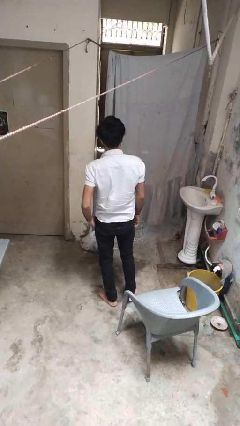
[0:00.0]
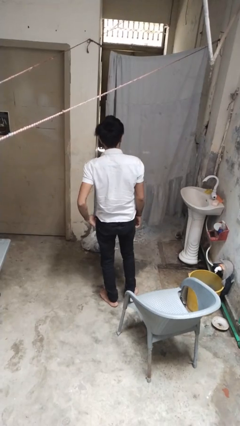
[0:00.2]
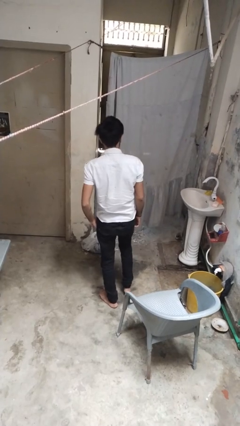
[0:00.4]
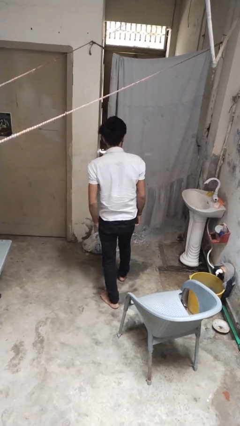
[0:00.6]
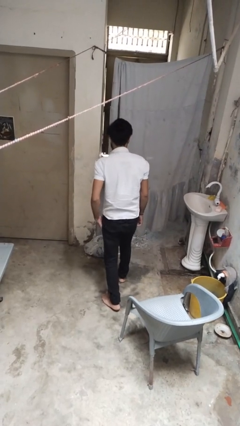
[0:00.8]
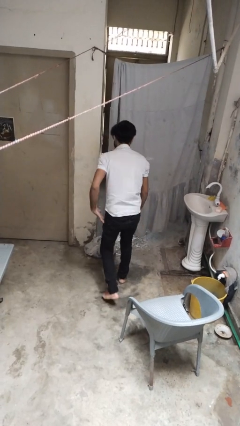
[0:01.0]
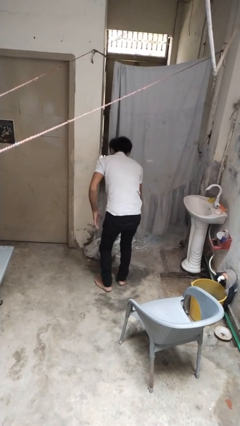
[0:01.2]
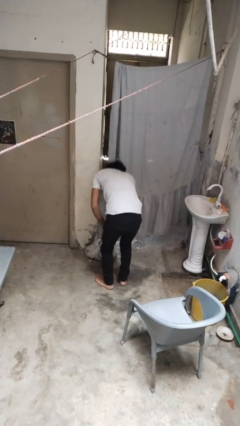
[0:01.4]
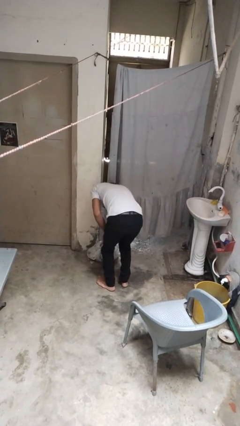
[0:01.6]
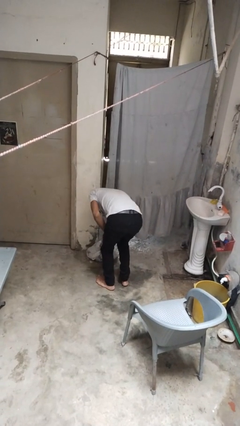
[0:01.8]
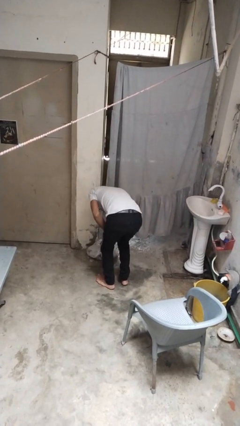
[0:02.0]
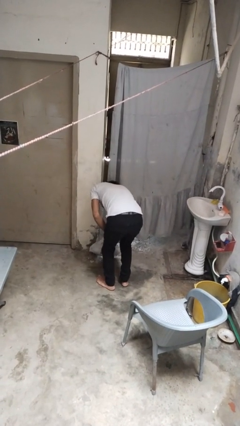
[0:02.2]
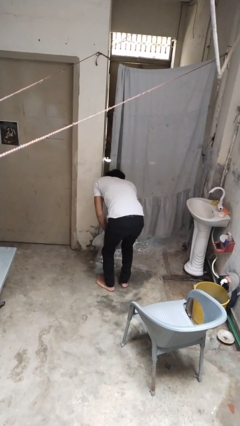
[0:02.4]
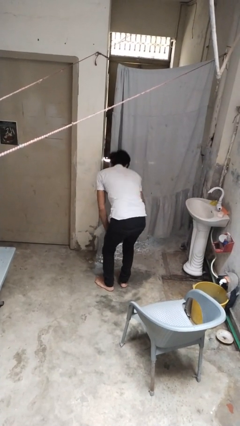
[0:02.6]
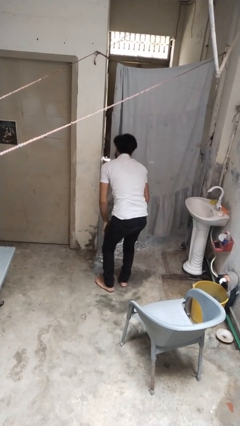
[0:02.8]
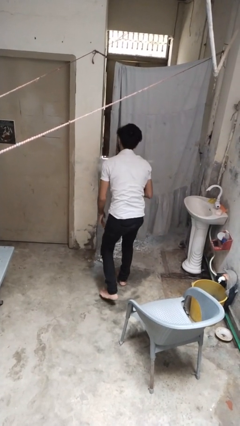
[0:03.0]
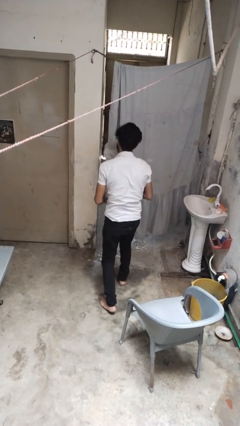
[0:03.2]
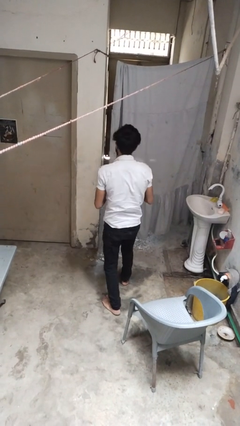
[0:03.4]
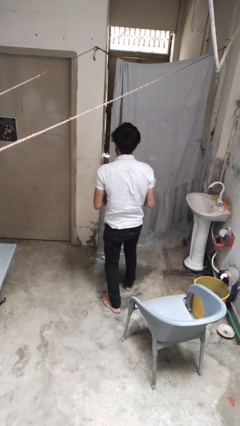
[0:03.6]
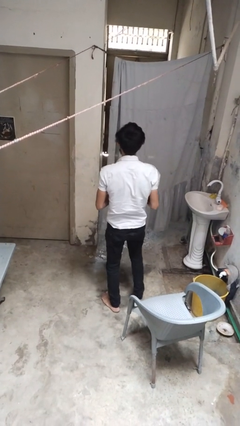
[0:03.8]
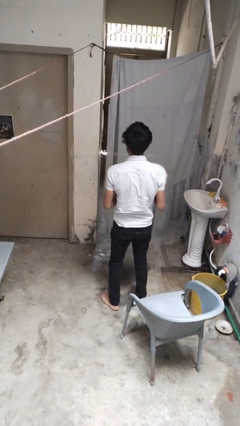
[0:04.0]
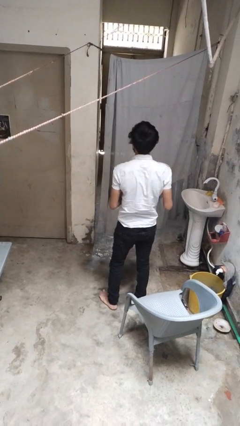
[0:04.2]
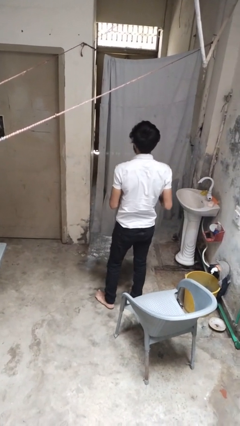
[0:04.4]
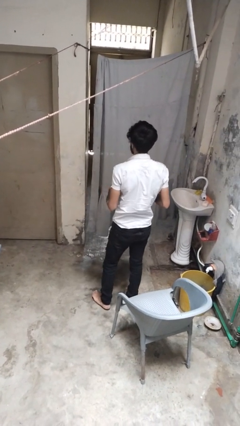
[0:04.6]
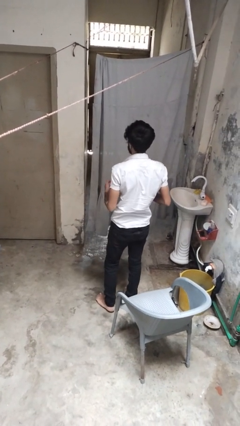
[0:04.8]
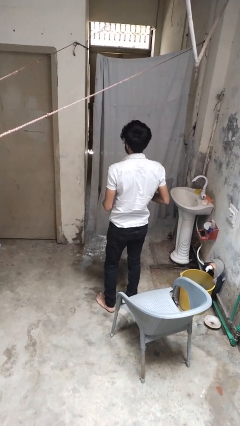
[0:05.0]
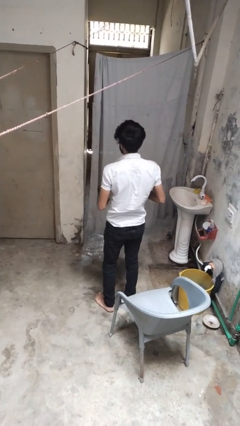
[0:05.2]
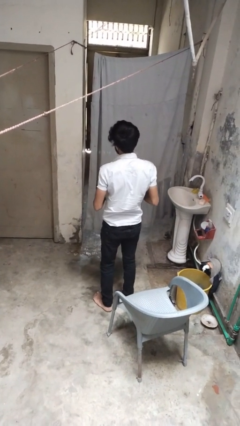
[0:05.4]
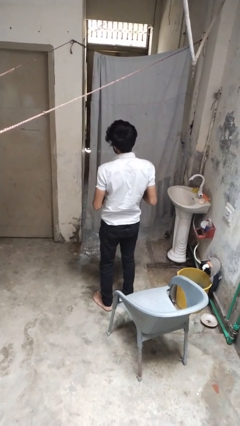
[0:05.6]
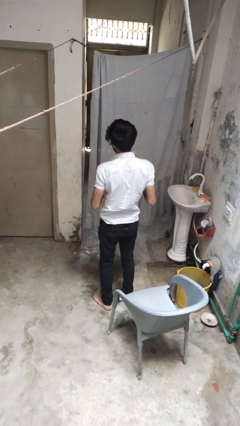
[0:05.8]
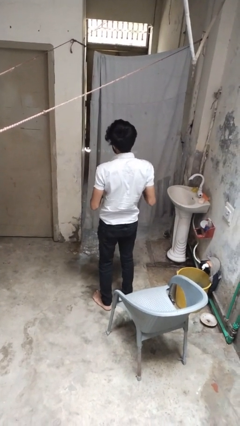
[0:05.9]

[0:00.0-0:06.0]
person picks up object from floor

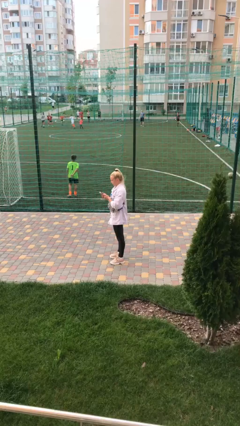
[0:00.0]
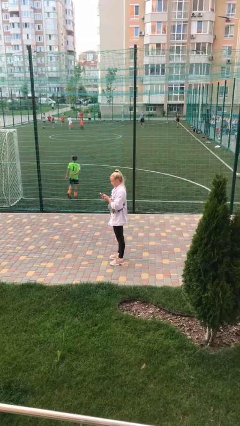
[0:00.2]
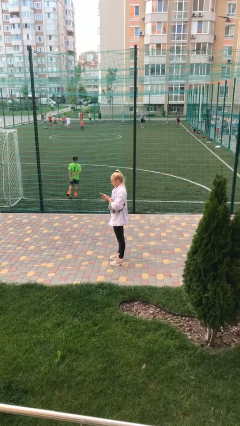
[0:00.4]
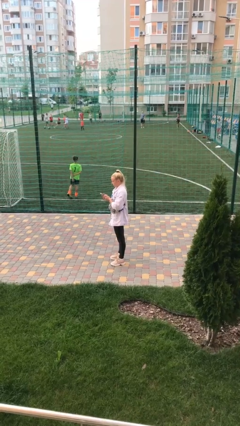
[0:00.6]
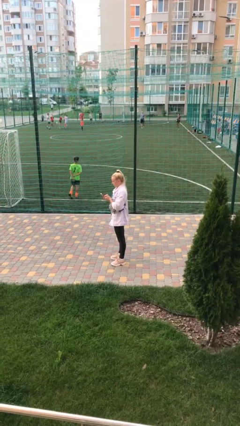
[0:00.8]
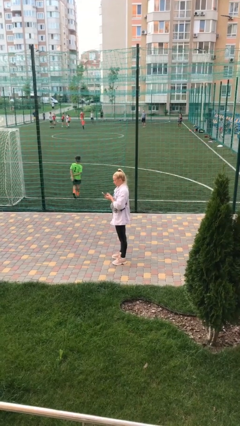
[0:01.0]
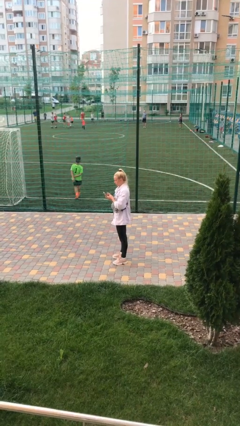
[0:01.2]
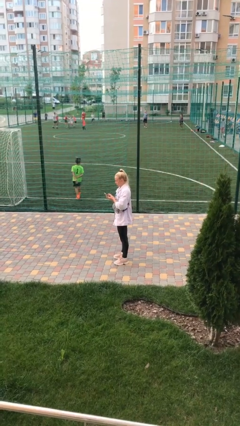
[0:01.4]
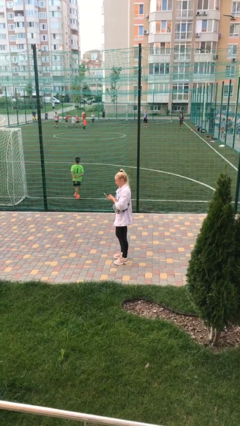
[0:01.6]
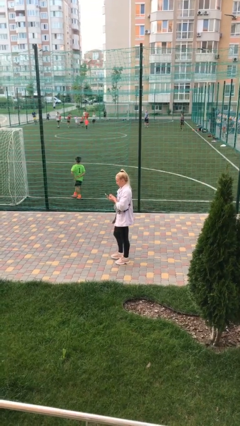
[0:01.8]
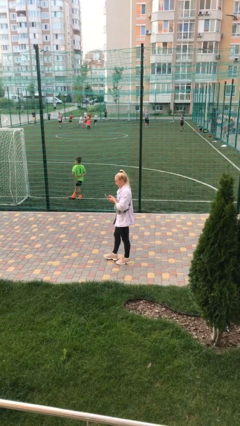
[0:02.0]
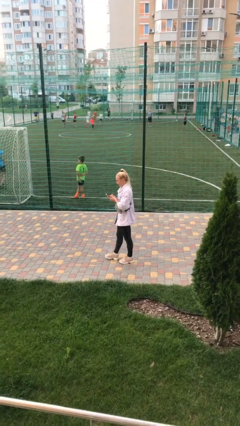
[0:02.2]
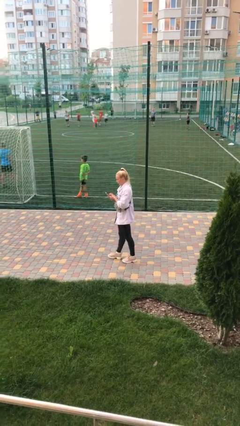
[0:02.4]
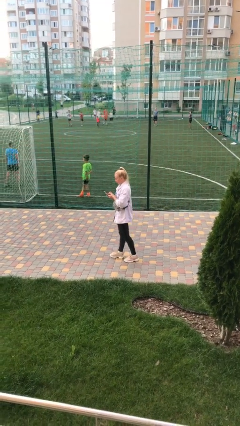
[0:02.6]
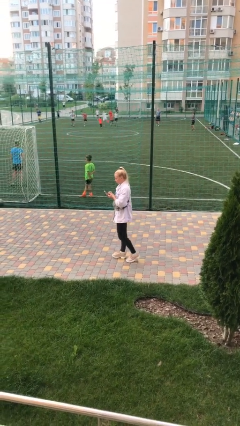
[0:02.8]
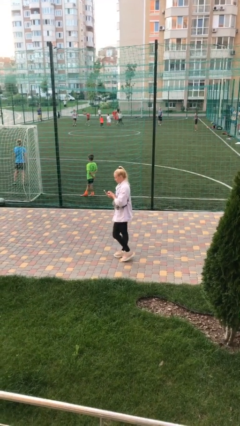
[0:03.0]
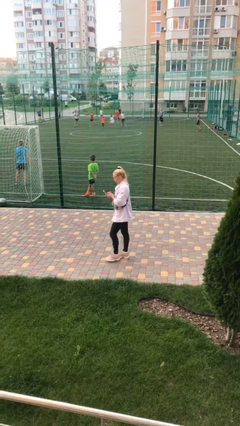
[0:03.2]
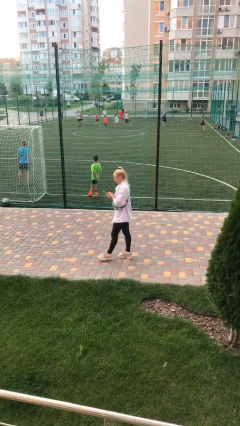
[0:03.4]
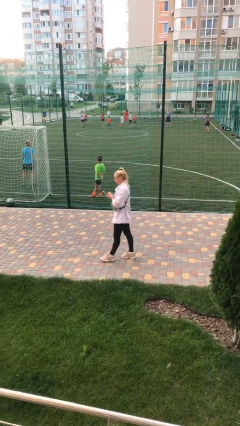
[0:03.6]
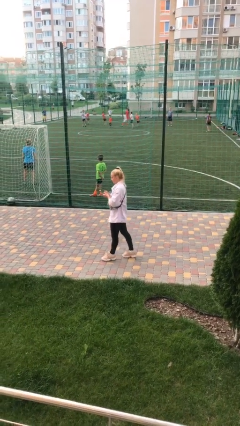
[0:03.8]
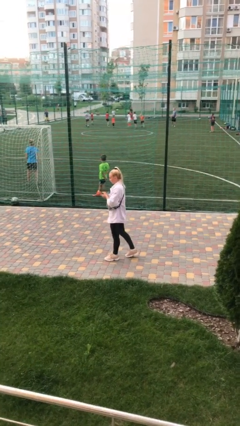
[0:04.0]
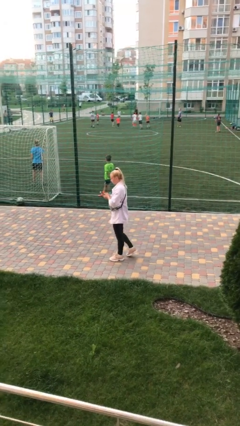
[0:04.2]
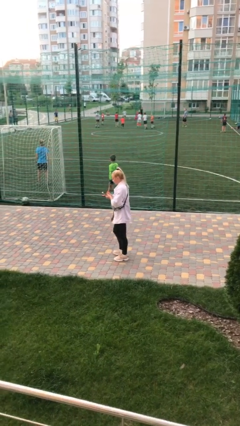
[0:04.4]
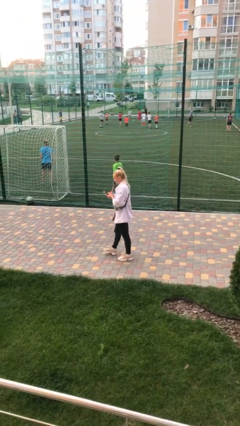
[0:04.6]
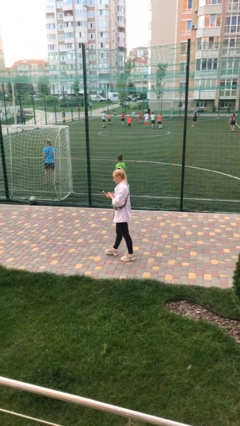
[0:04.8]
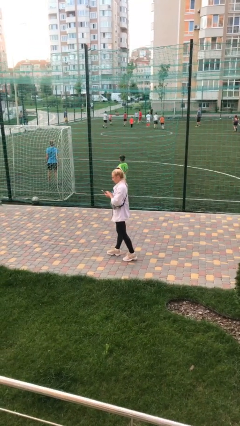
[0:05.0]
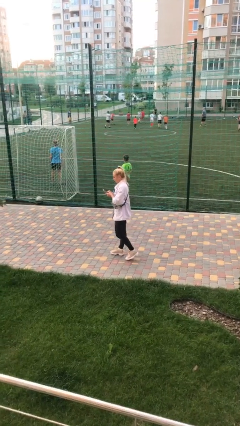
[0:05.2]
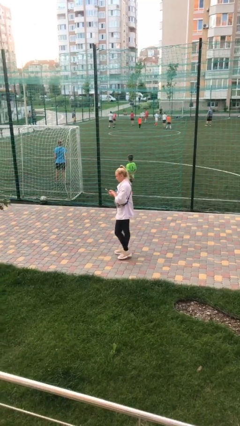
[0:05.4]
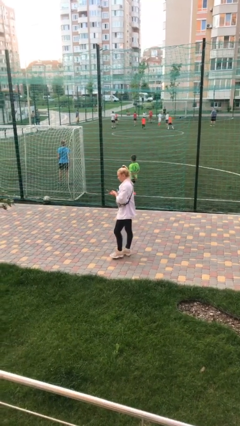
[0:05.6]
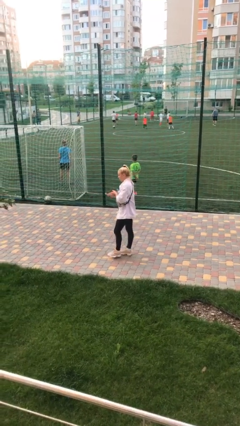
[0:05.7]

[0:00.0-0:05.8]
person texts on phone

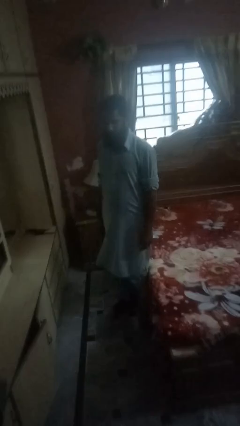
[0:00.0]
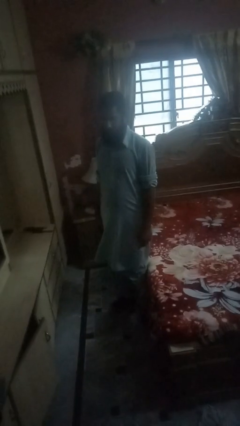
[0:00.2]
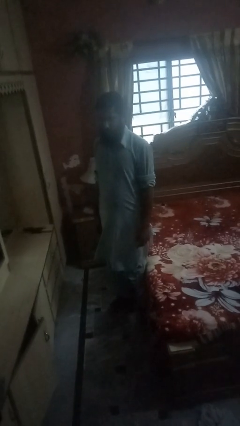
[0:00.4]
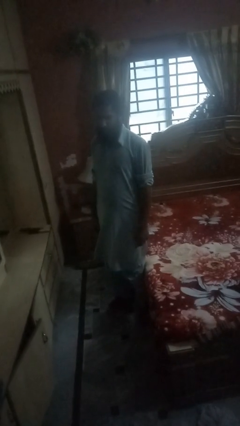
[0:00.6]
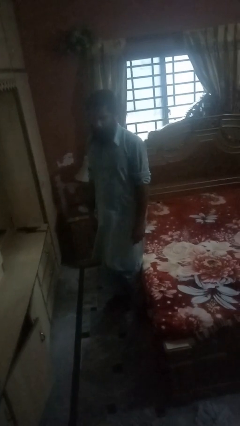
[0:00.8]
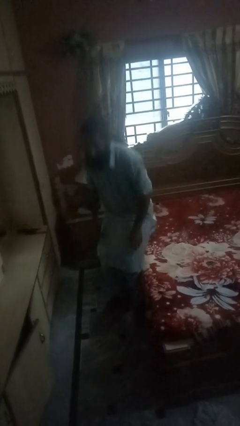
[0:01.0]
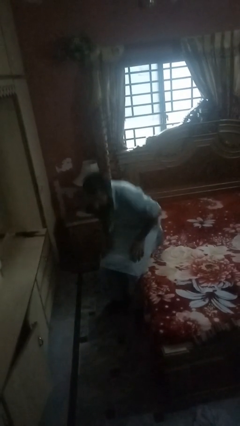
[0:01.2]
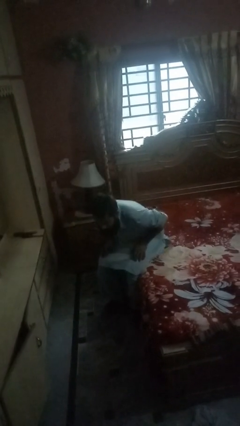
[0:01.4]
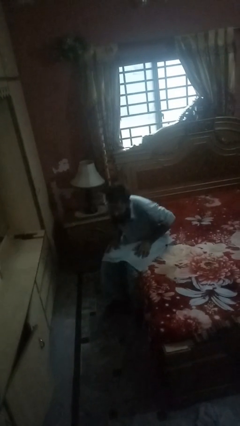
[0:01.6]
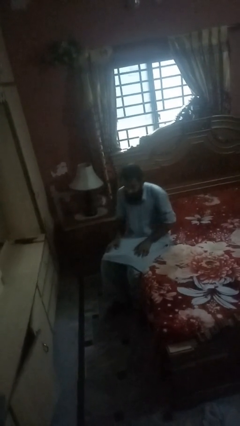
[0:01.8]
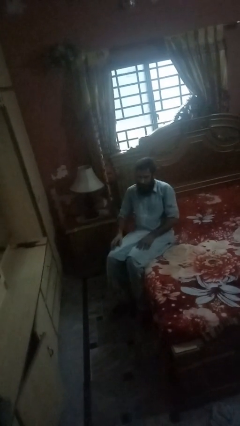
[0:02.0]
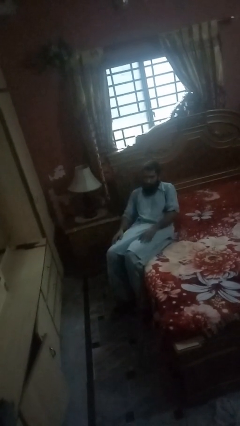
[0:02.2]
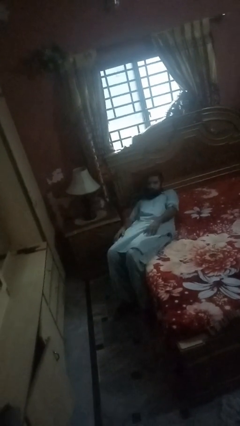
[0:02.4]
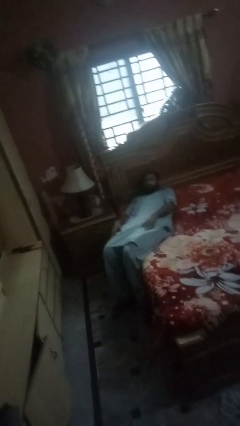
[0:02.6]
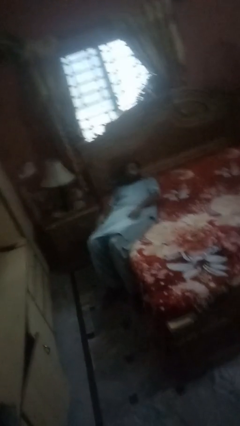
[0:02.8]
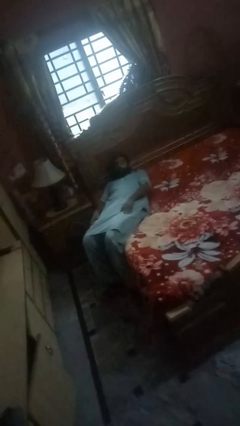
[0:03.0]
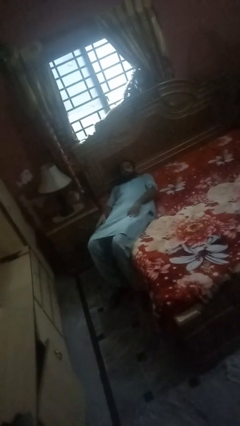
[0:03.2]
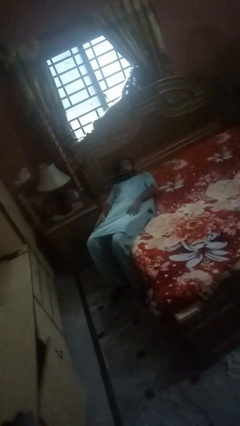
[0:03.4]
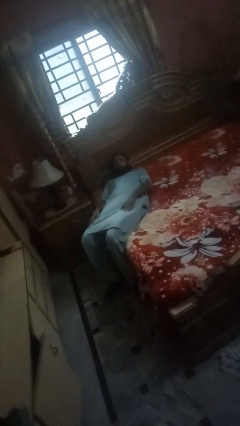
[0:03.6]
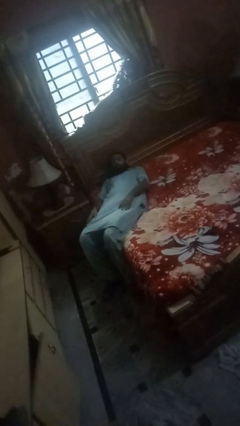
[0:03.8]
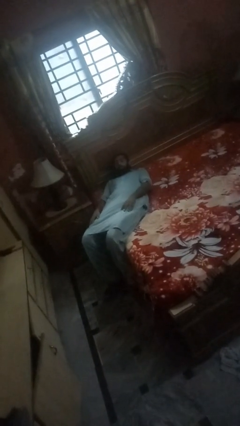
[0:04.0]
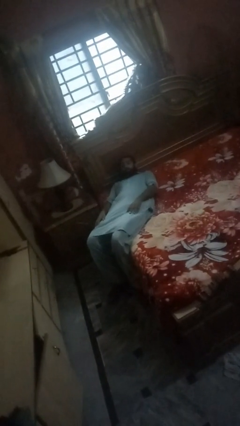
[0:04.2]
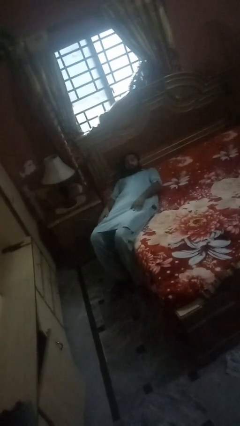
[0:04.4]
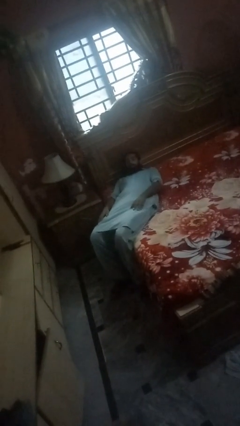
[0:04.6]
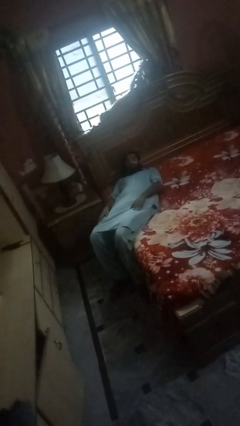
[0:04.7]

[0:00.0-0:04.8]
person lies down on bed

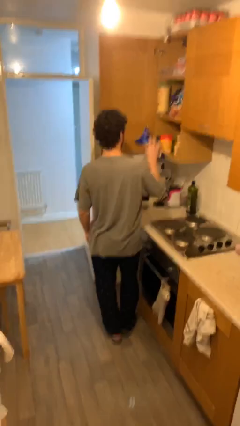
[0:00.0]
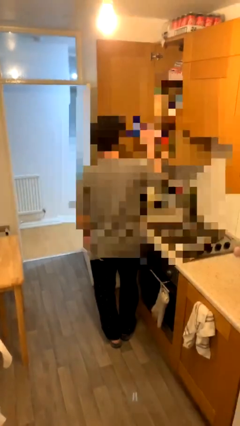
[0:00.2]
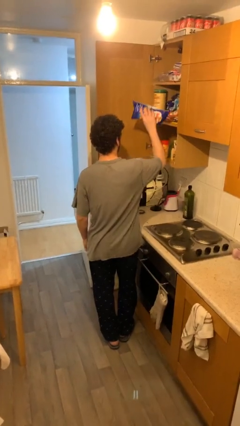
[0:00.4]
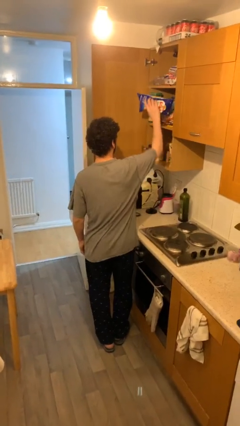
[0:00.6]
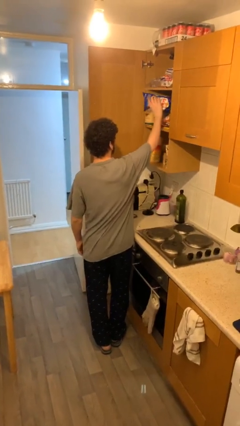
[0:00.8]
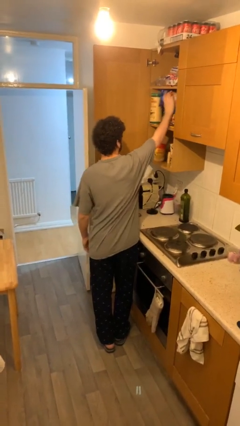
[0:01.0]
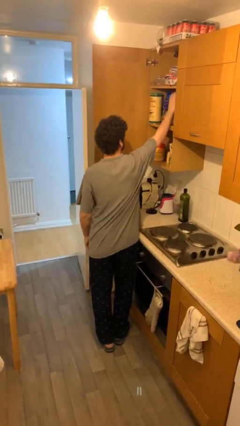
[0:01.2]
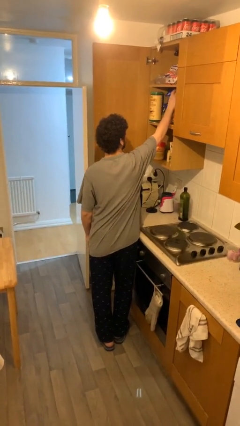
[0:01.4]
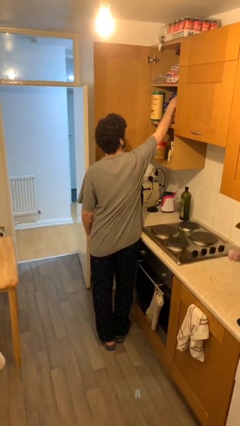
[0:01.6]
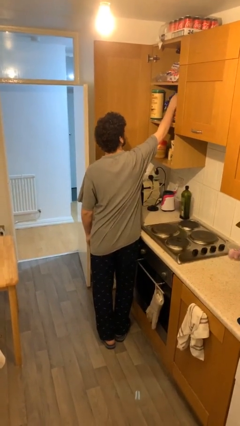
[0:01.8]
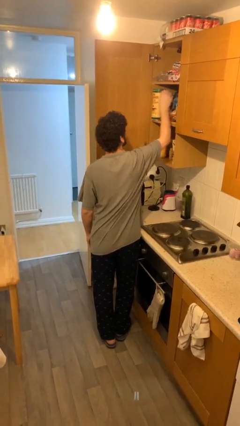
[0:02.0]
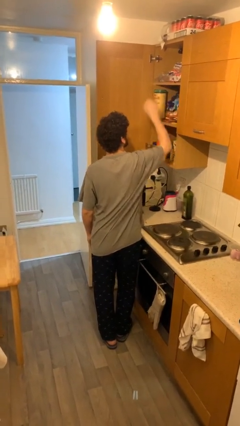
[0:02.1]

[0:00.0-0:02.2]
person puts down object on shelf
